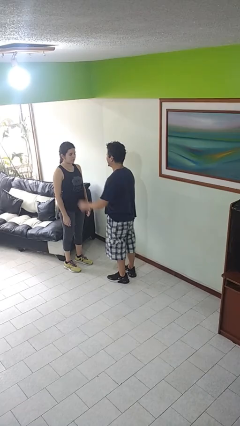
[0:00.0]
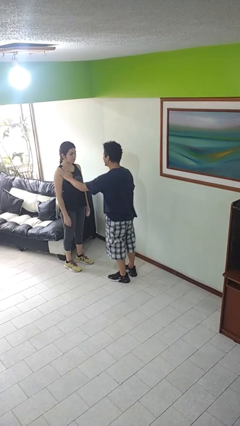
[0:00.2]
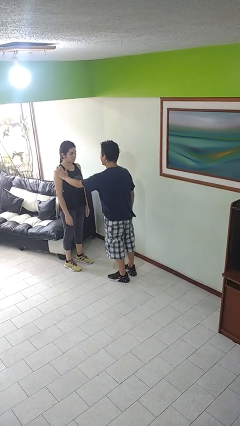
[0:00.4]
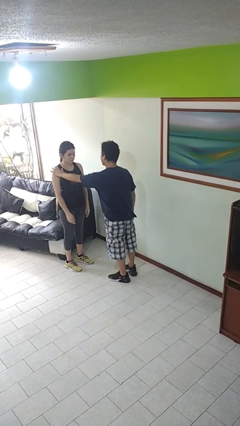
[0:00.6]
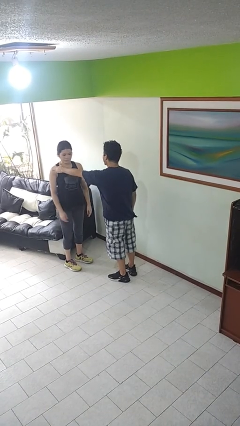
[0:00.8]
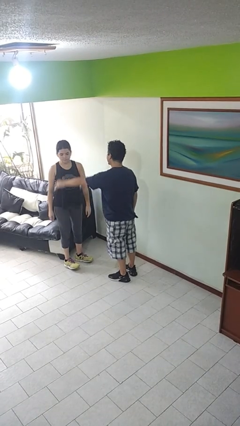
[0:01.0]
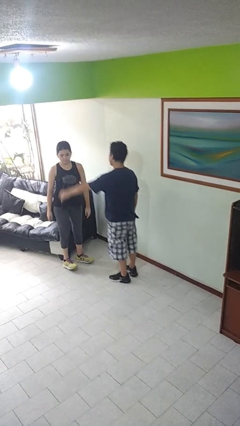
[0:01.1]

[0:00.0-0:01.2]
person shoves person

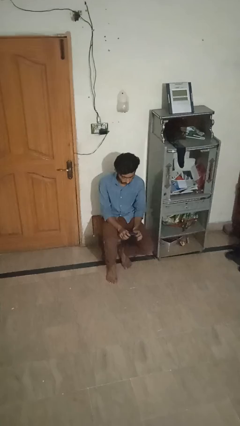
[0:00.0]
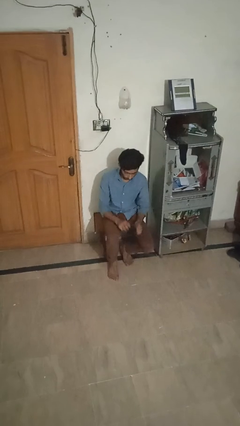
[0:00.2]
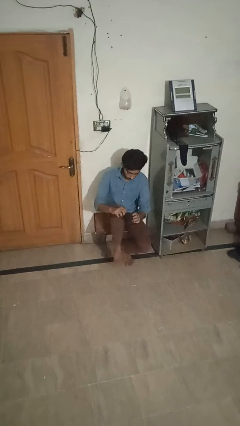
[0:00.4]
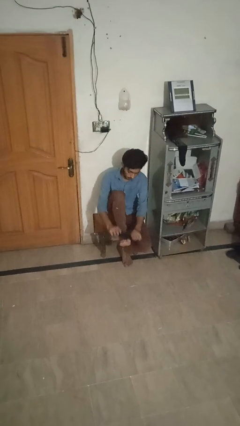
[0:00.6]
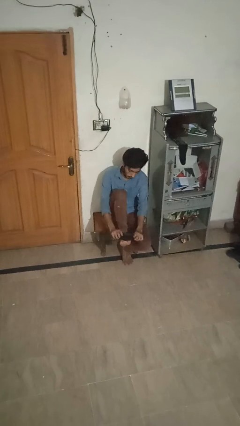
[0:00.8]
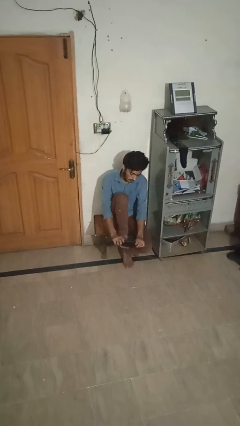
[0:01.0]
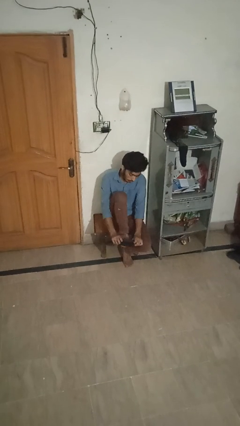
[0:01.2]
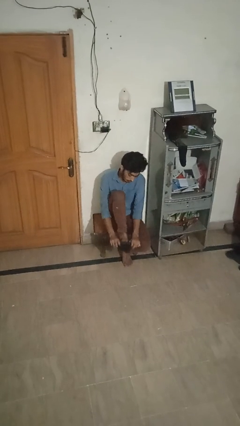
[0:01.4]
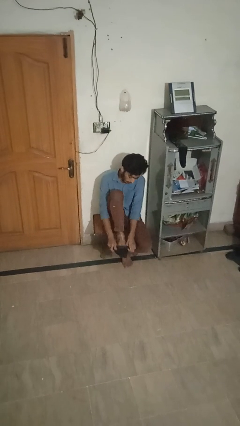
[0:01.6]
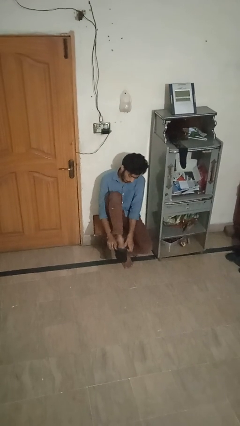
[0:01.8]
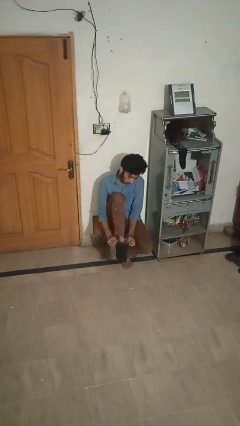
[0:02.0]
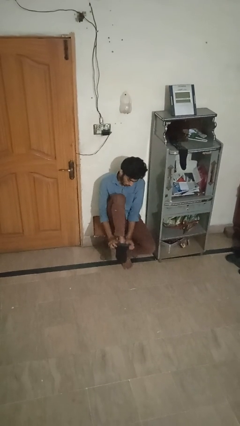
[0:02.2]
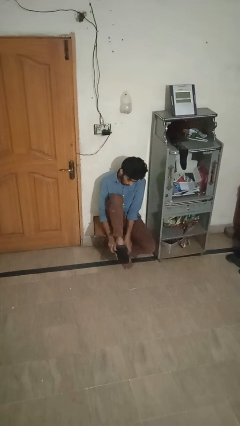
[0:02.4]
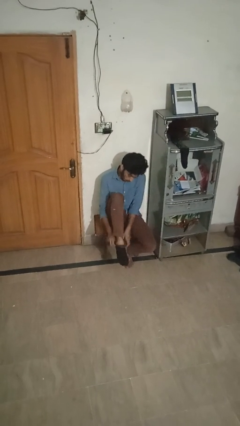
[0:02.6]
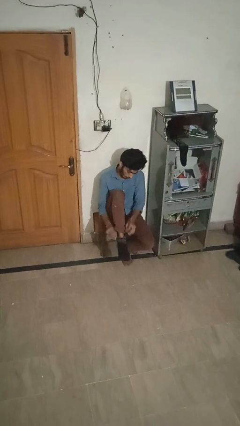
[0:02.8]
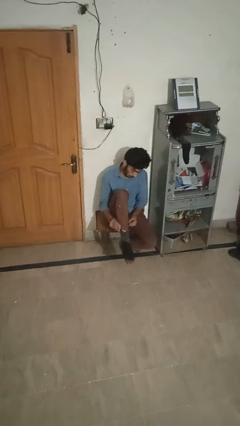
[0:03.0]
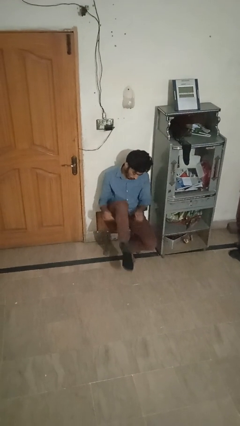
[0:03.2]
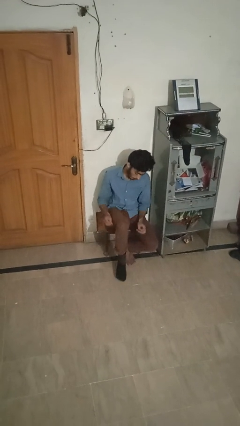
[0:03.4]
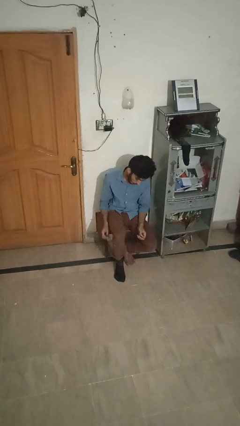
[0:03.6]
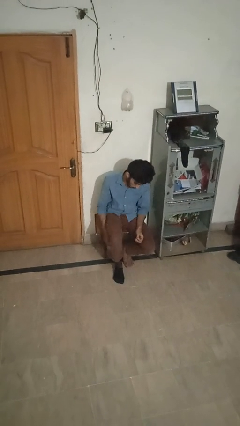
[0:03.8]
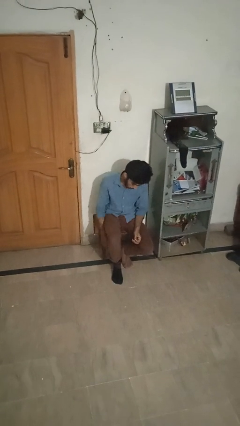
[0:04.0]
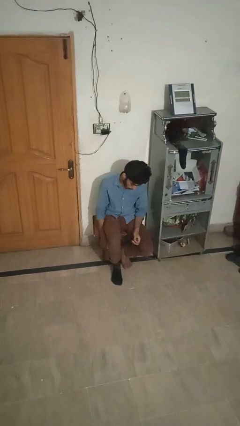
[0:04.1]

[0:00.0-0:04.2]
person puts on socks

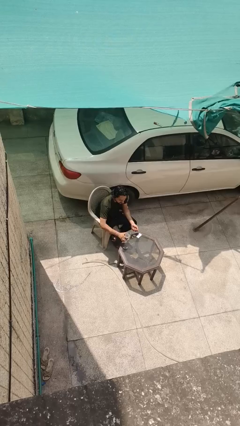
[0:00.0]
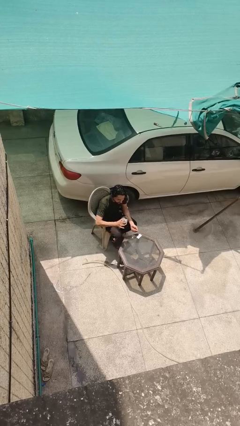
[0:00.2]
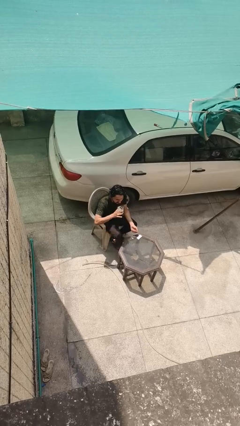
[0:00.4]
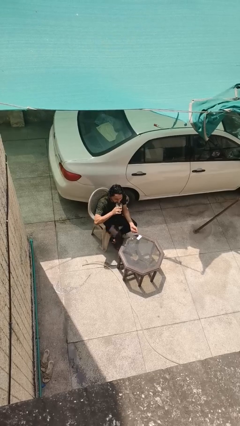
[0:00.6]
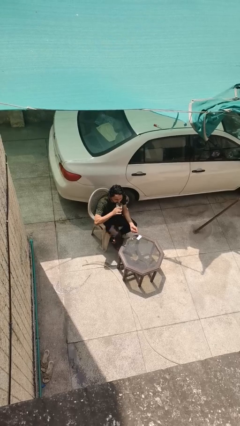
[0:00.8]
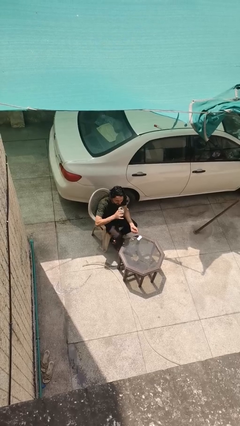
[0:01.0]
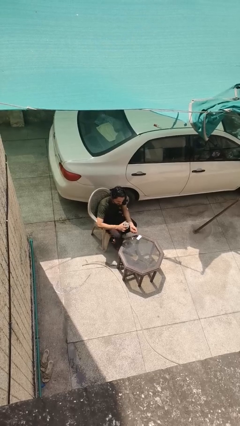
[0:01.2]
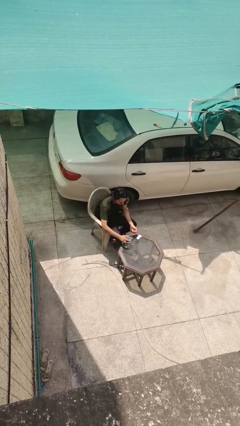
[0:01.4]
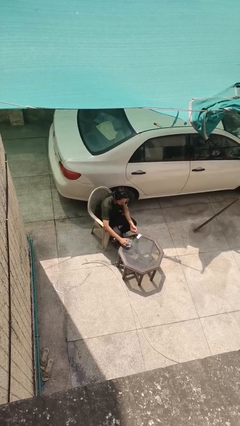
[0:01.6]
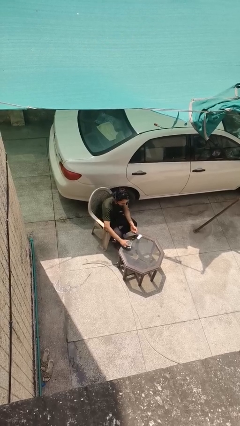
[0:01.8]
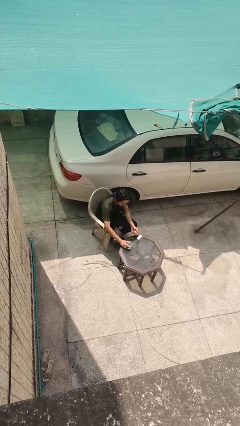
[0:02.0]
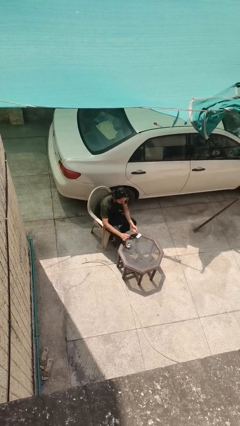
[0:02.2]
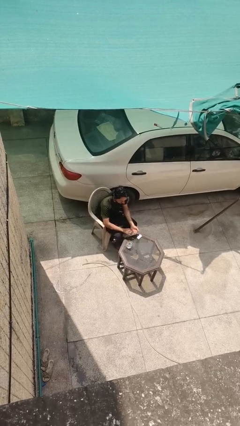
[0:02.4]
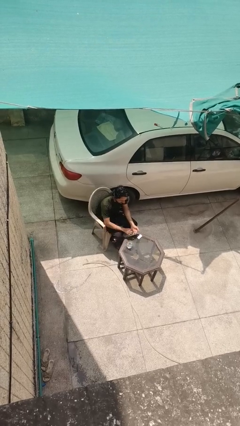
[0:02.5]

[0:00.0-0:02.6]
person drinks from cup

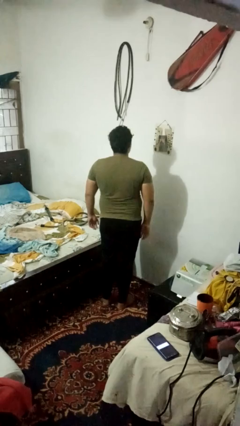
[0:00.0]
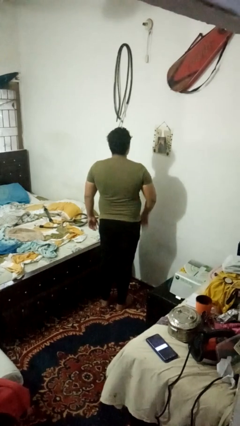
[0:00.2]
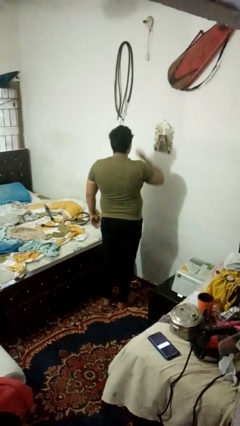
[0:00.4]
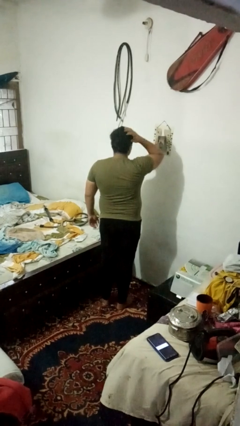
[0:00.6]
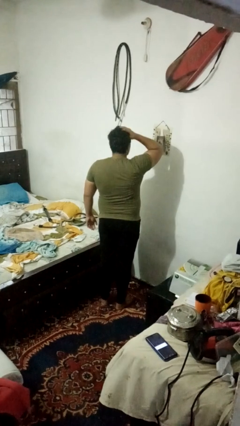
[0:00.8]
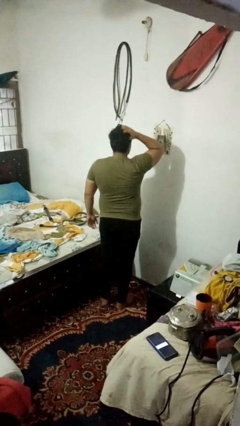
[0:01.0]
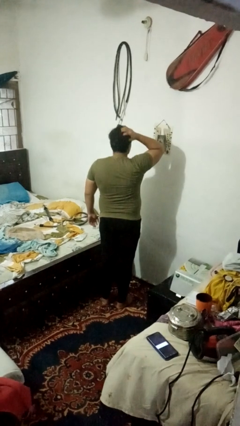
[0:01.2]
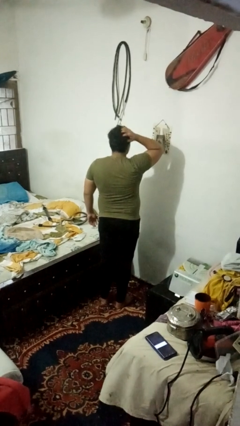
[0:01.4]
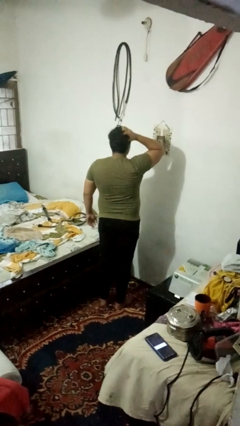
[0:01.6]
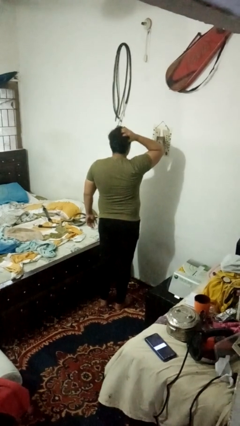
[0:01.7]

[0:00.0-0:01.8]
person strokes hair

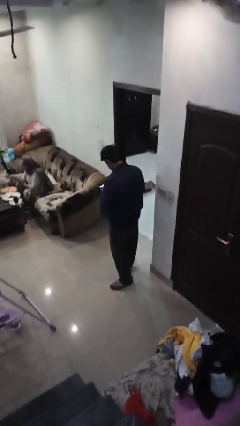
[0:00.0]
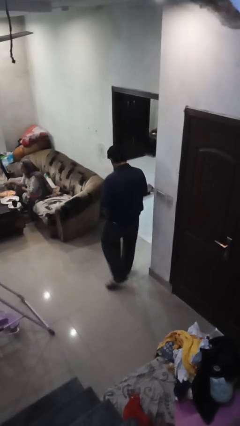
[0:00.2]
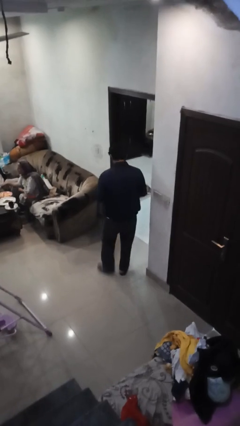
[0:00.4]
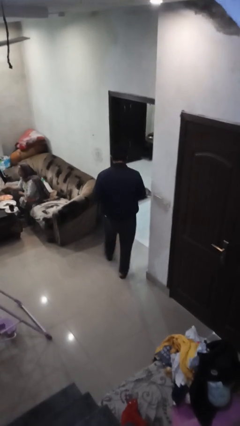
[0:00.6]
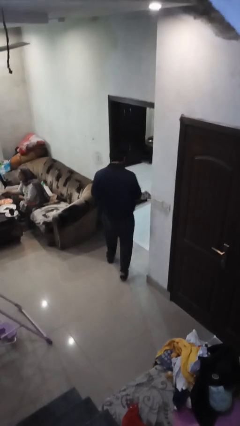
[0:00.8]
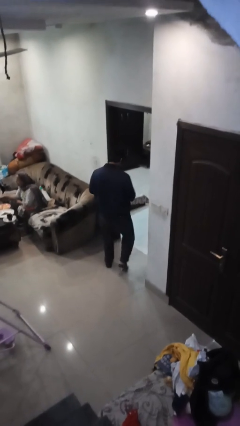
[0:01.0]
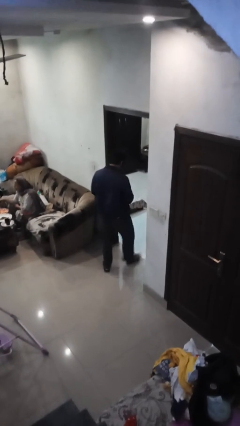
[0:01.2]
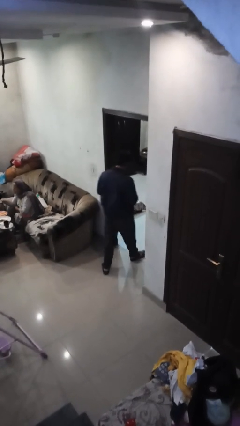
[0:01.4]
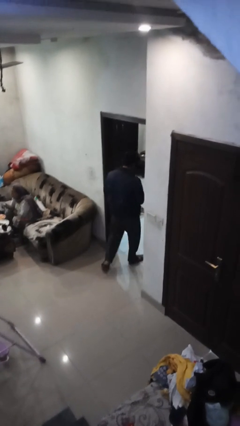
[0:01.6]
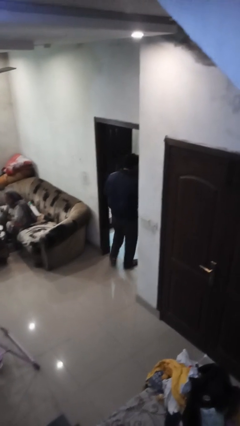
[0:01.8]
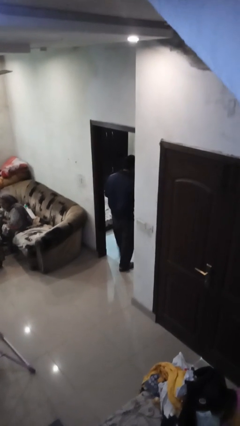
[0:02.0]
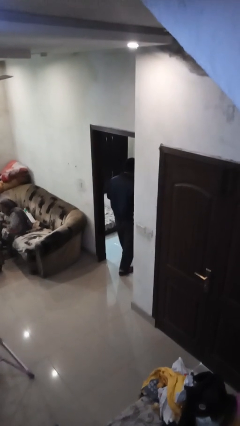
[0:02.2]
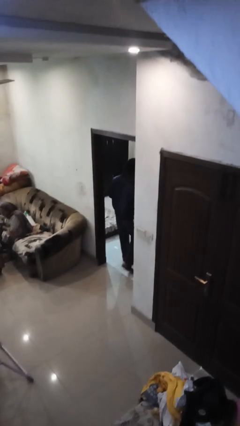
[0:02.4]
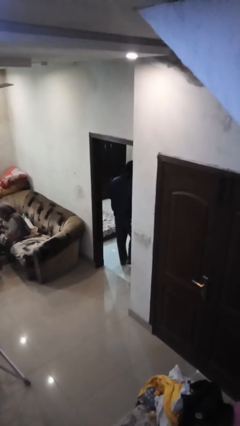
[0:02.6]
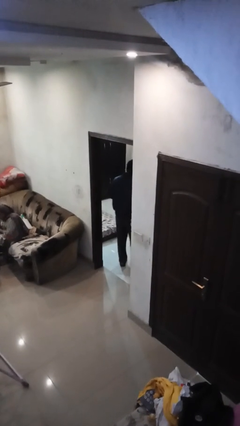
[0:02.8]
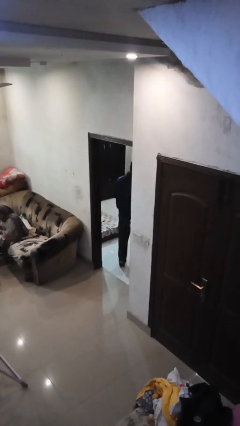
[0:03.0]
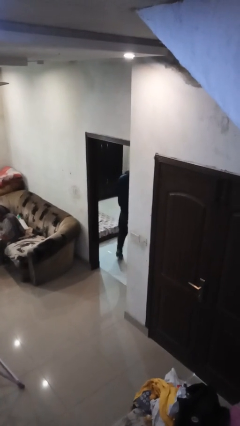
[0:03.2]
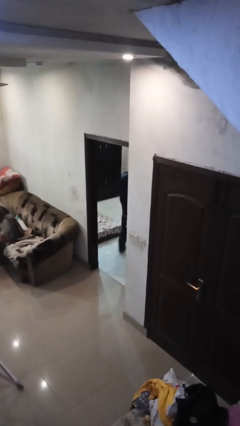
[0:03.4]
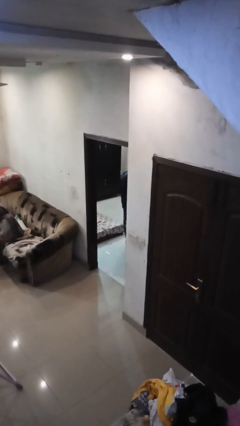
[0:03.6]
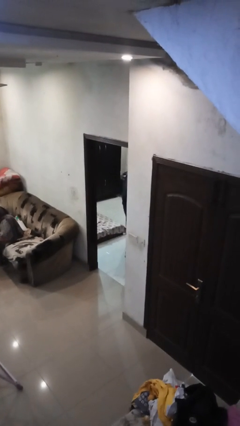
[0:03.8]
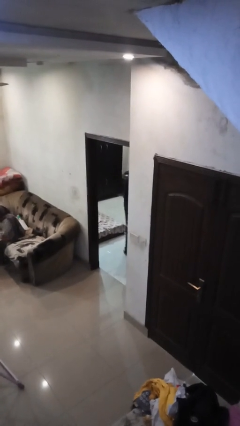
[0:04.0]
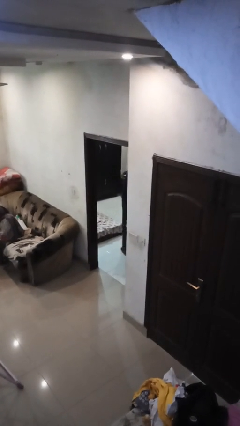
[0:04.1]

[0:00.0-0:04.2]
person exits scene through structure

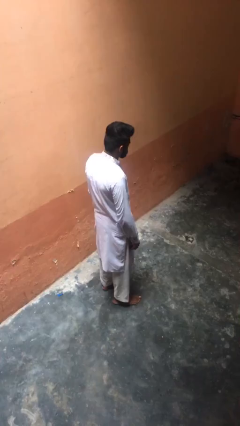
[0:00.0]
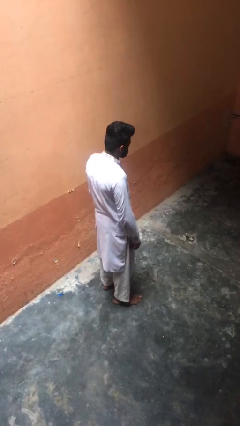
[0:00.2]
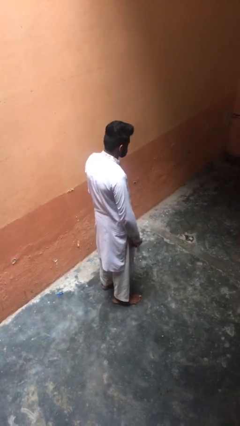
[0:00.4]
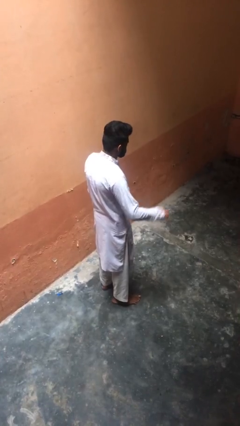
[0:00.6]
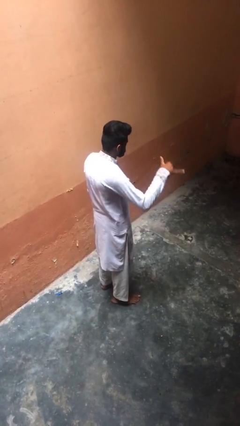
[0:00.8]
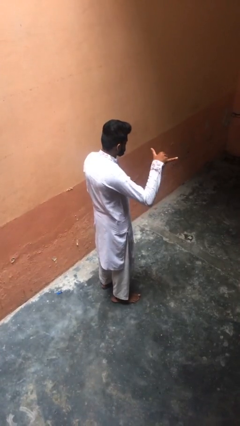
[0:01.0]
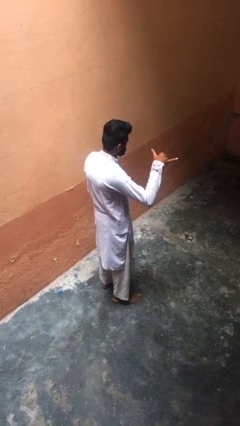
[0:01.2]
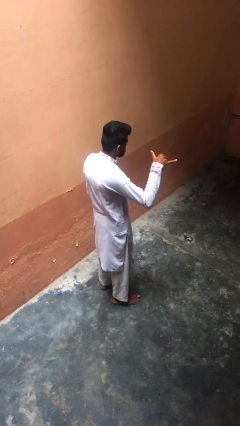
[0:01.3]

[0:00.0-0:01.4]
person gestures hang loose

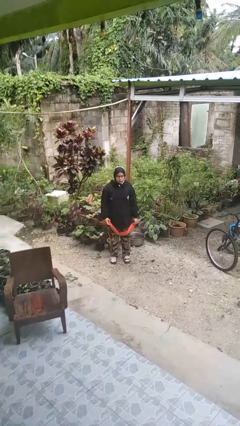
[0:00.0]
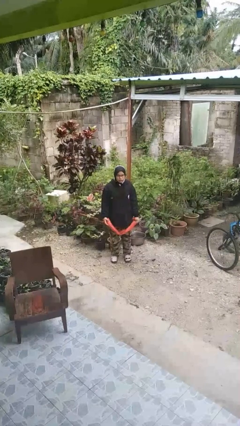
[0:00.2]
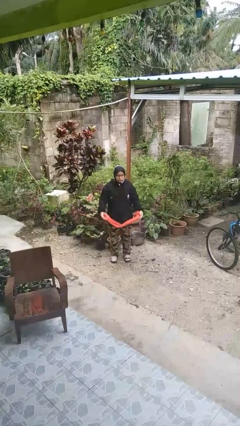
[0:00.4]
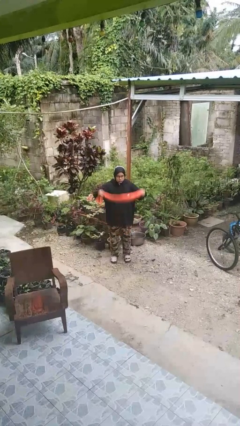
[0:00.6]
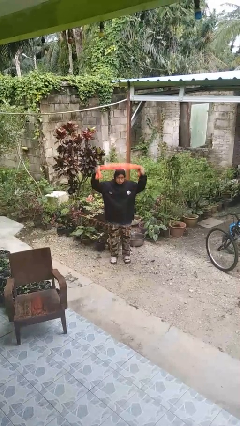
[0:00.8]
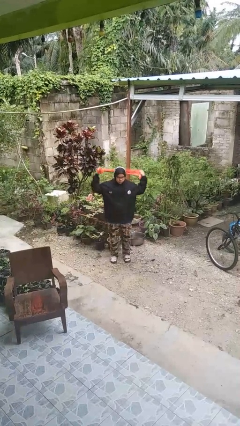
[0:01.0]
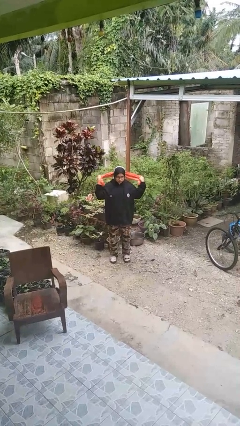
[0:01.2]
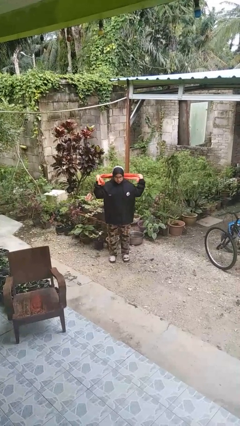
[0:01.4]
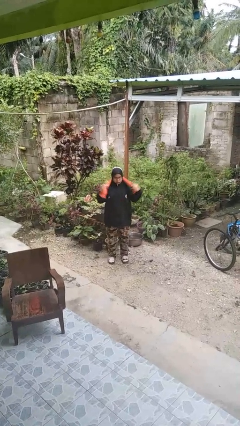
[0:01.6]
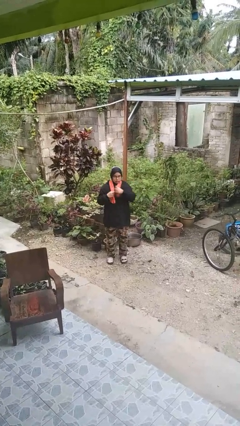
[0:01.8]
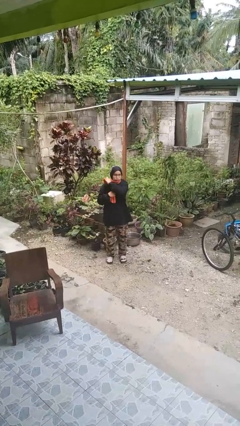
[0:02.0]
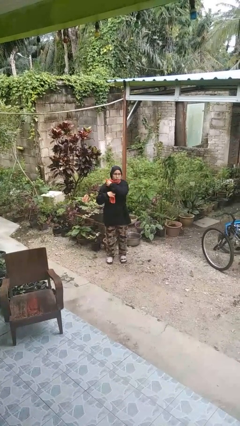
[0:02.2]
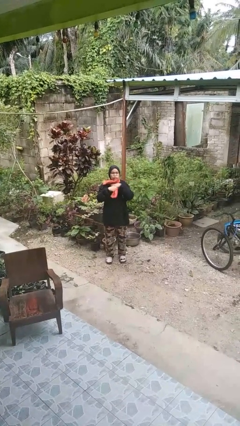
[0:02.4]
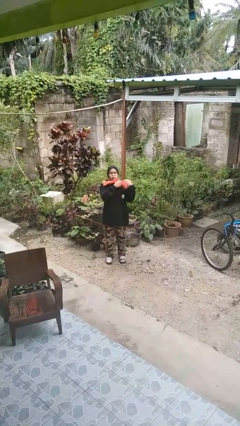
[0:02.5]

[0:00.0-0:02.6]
person puts on scarf
